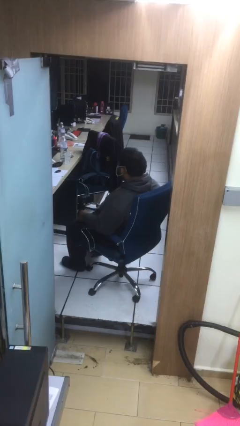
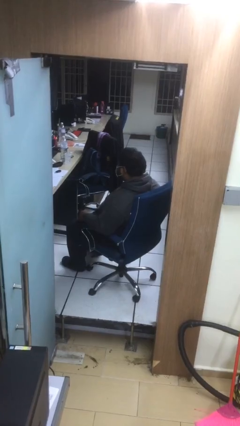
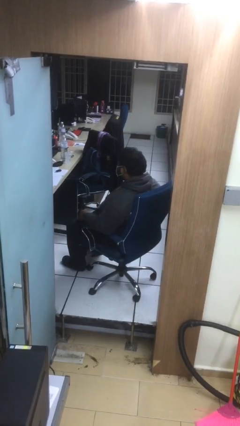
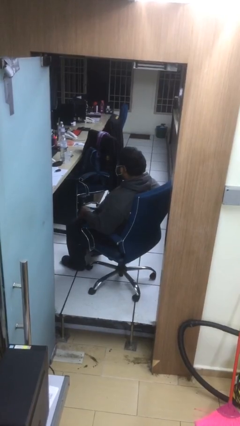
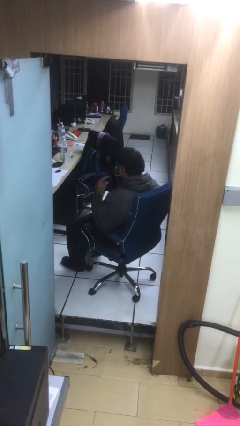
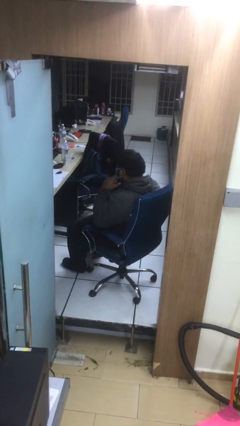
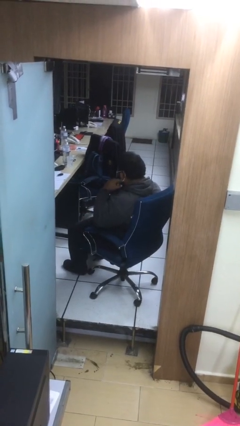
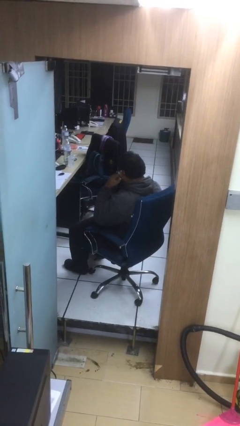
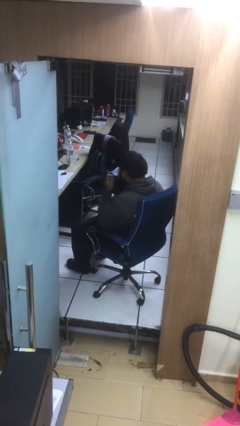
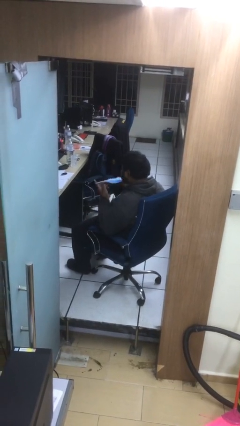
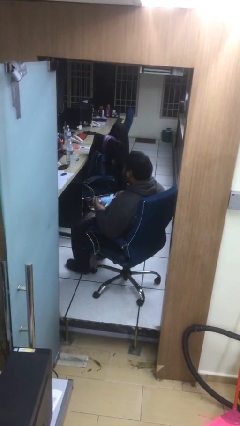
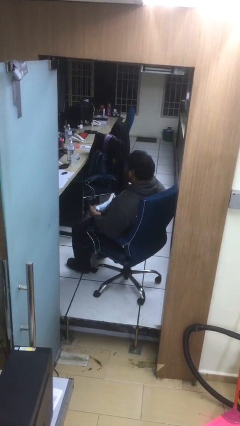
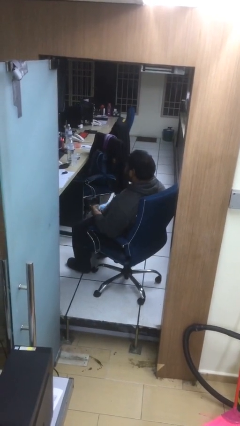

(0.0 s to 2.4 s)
person takes off facemask

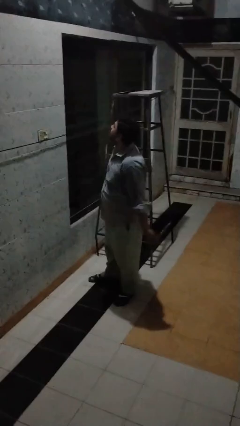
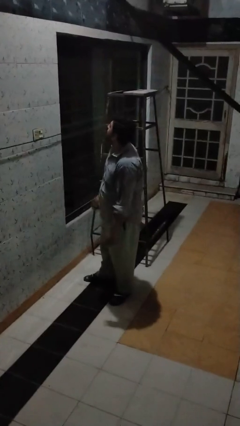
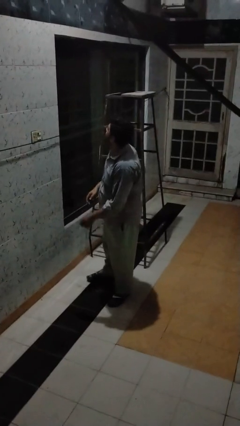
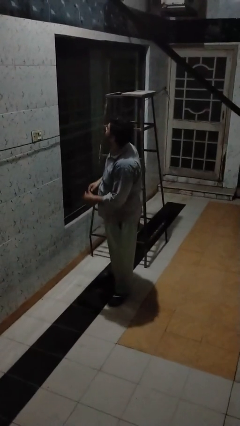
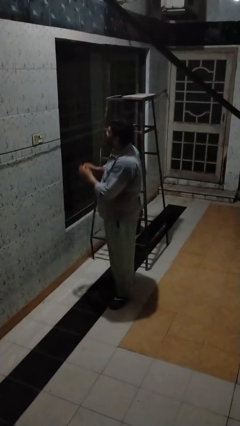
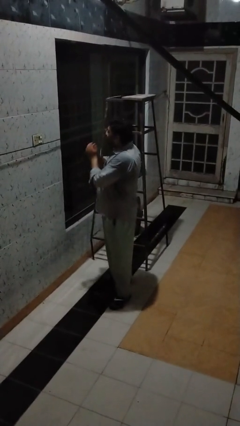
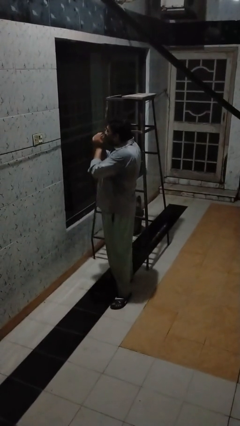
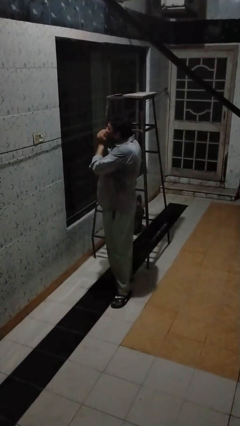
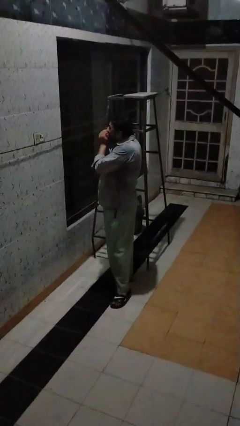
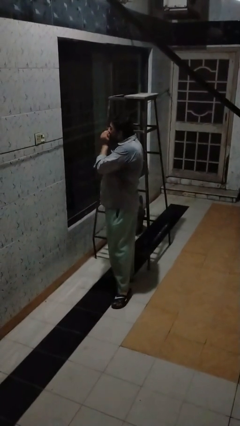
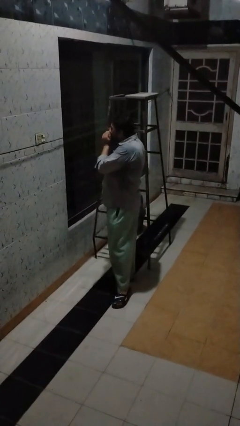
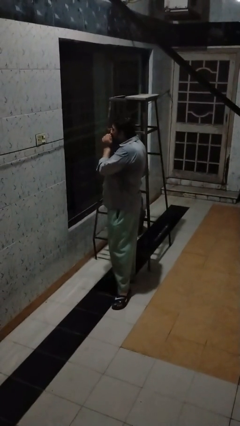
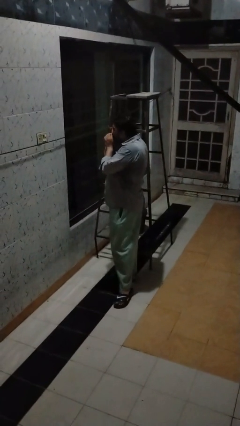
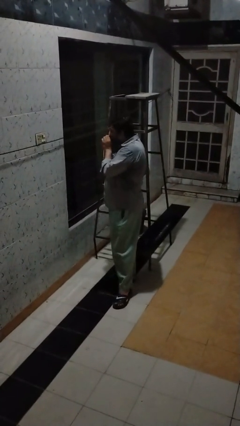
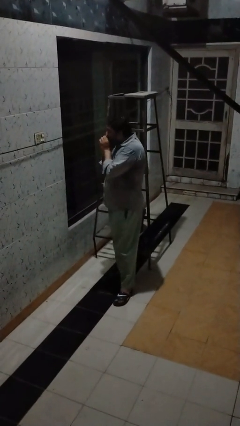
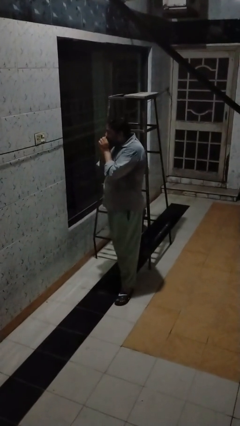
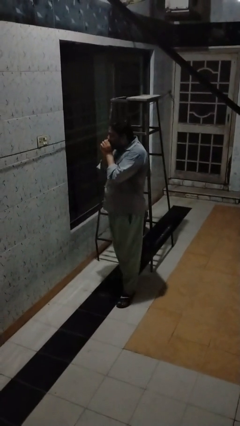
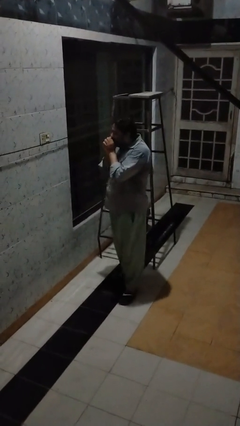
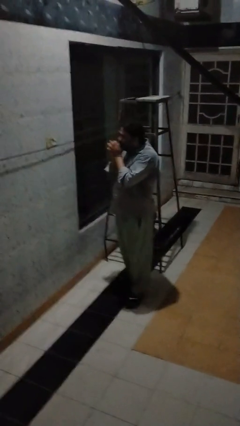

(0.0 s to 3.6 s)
person blows into hands

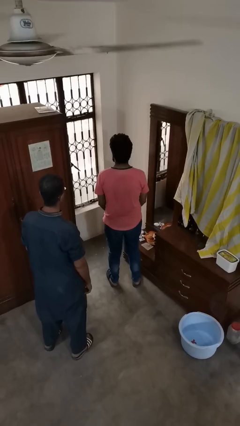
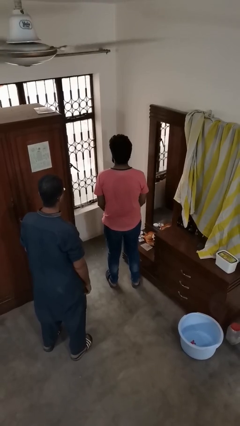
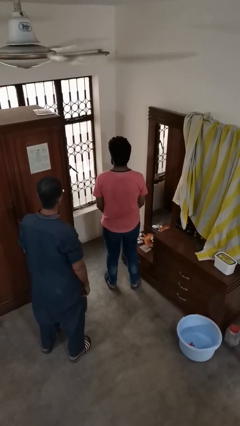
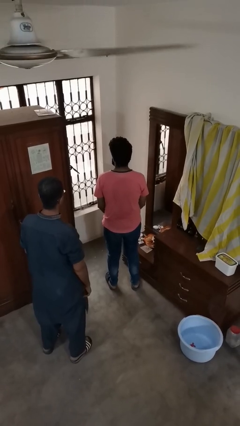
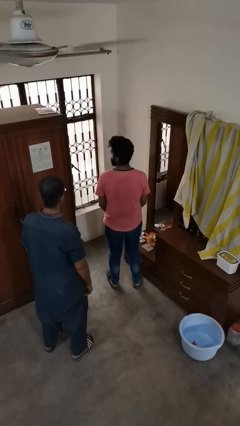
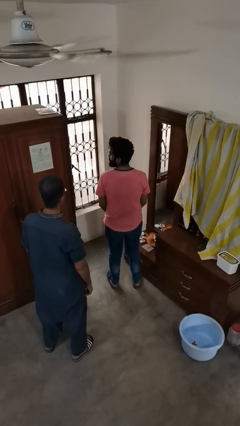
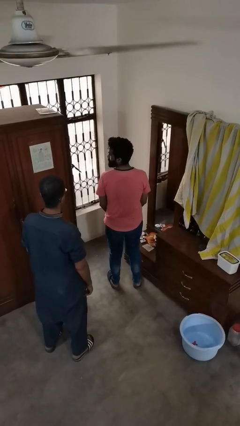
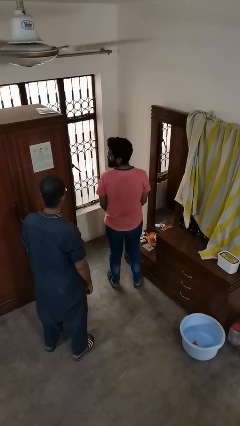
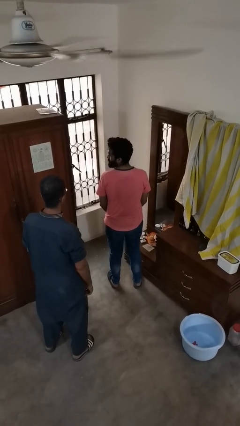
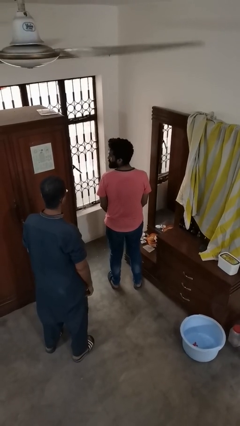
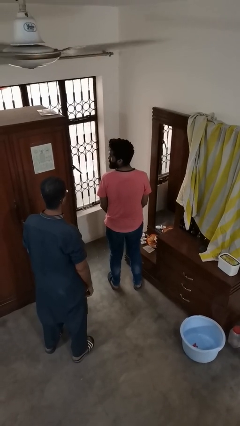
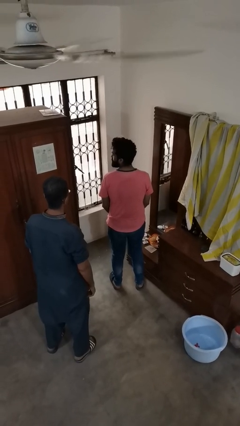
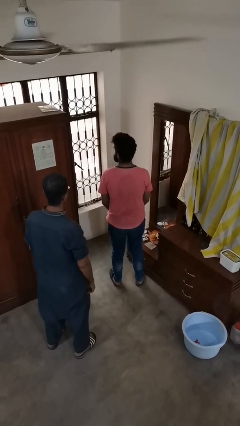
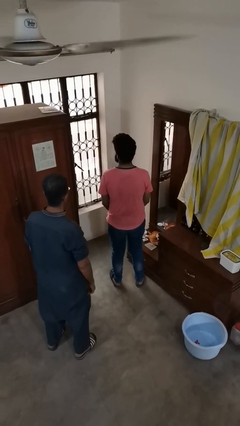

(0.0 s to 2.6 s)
person looks over shoulder

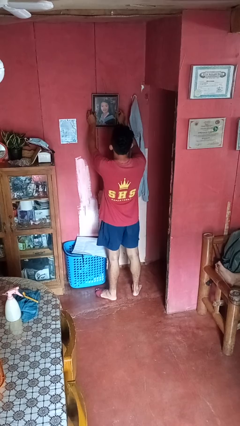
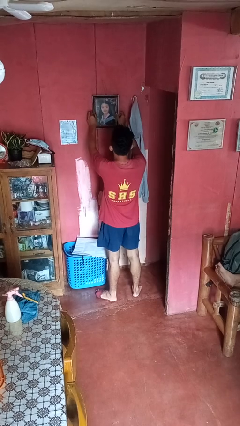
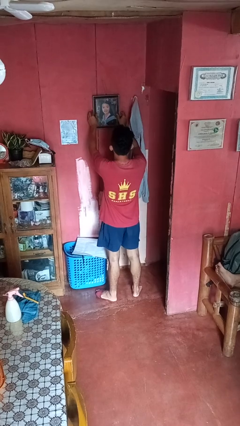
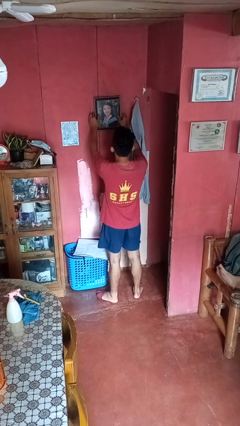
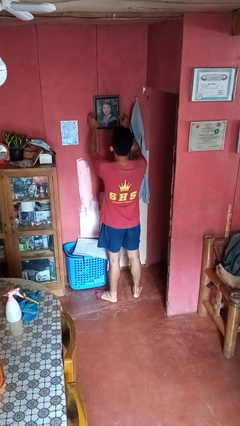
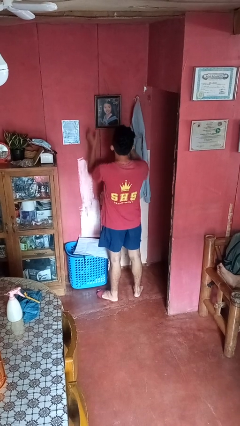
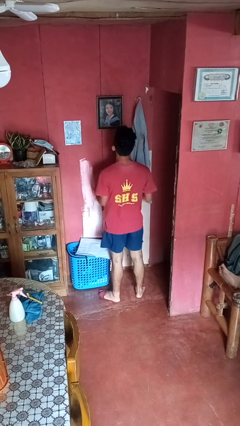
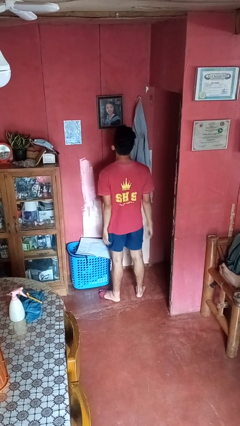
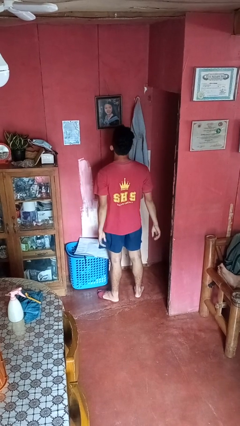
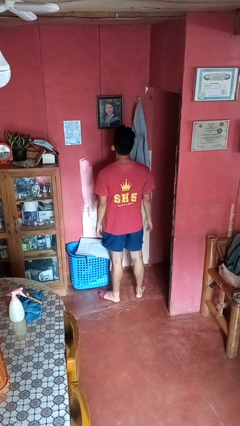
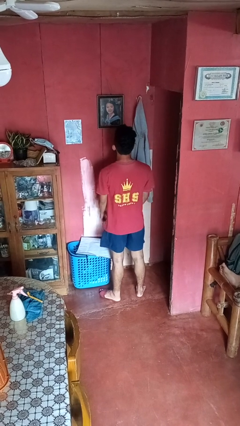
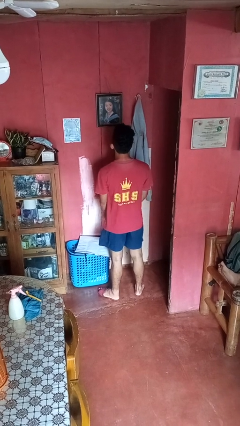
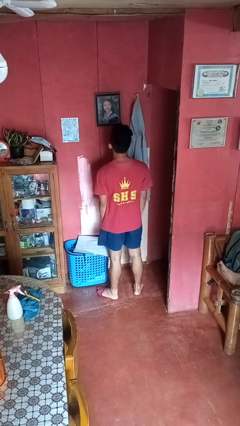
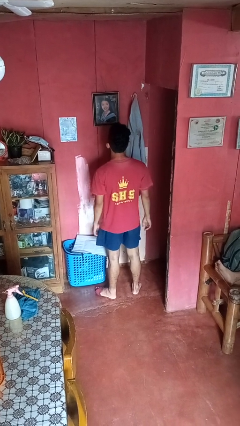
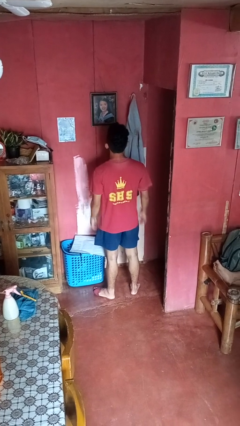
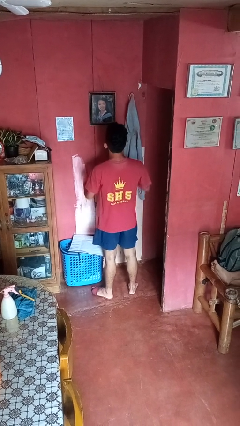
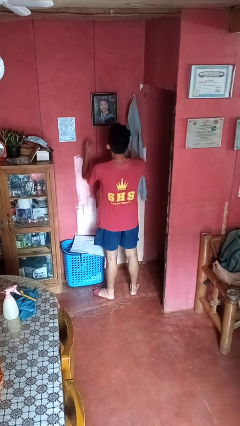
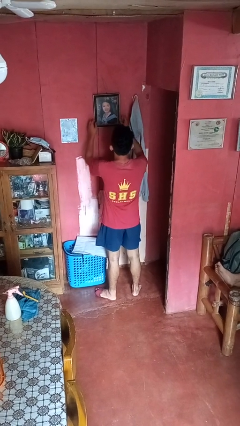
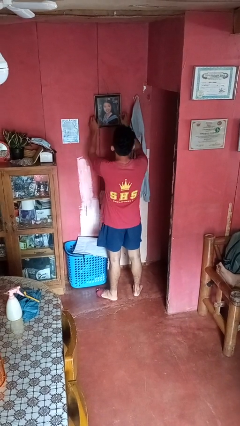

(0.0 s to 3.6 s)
person puts up picture frame

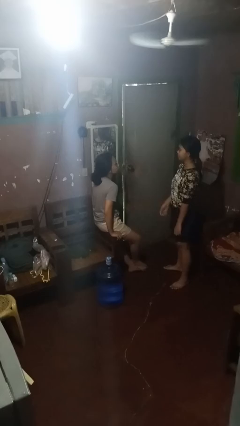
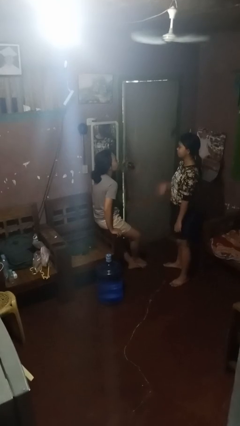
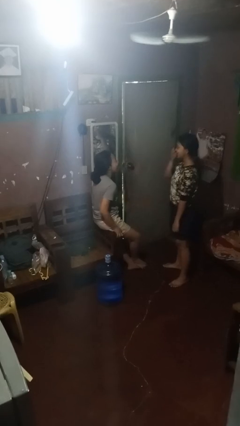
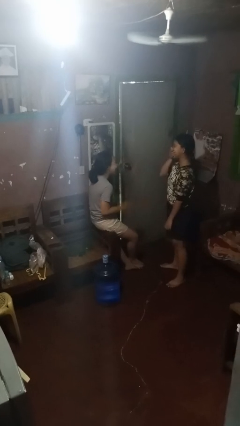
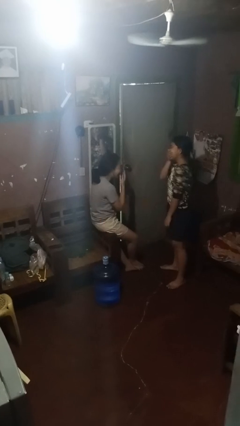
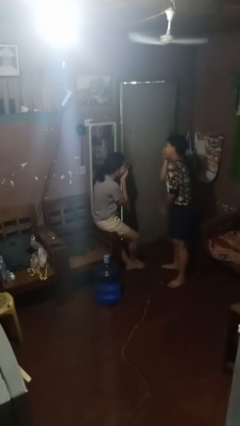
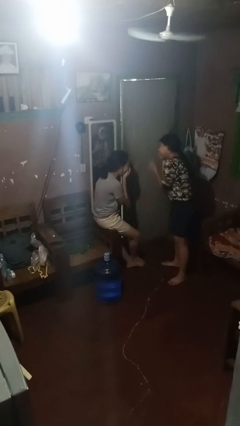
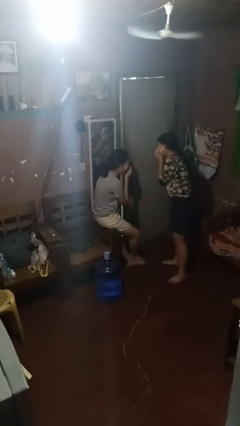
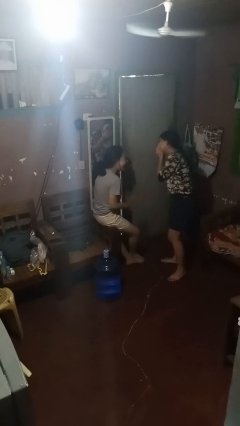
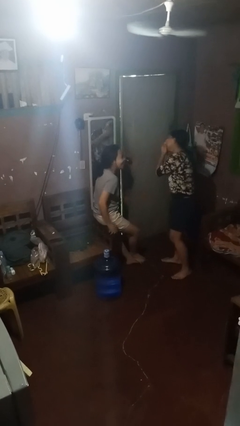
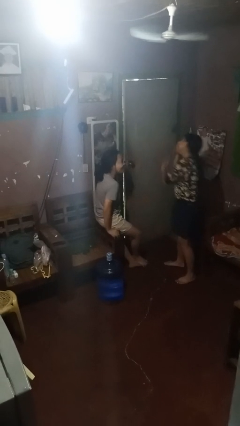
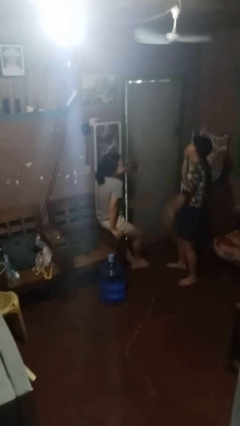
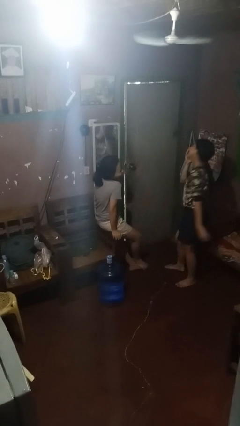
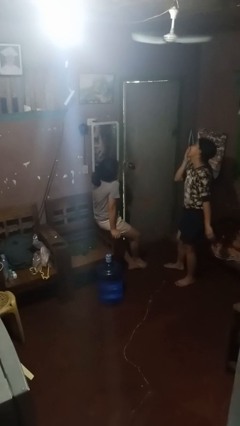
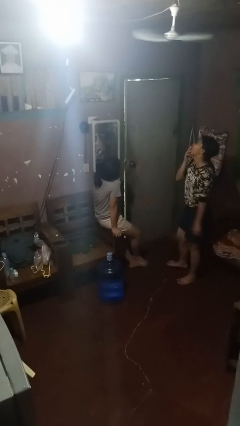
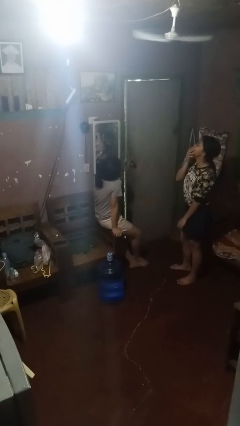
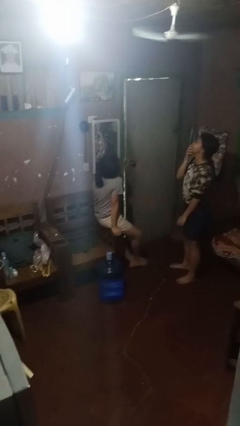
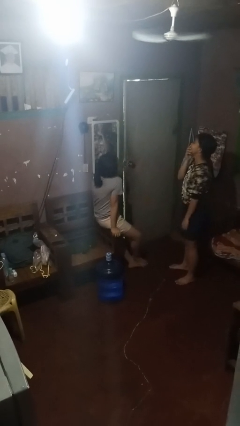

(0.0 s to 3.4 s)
person laughs with person

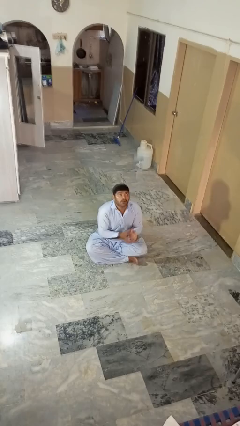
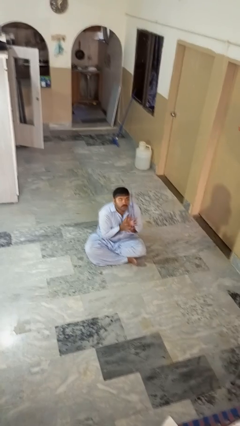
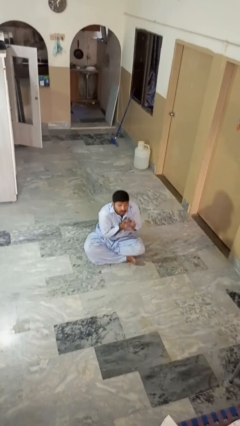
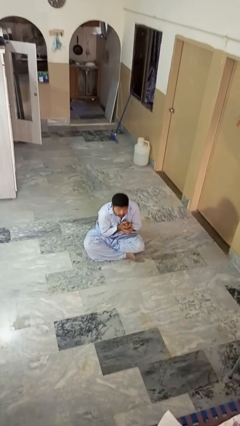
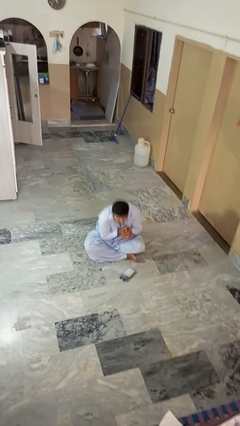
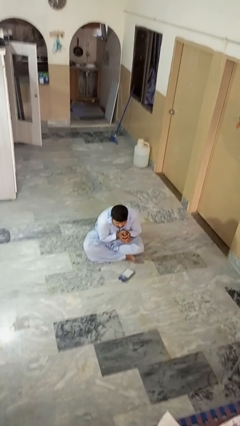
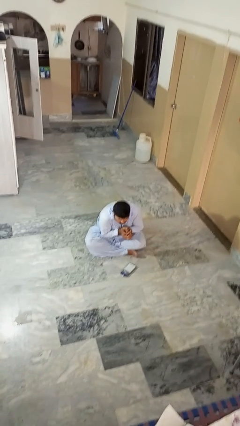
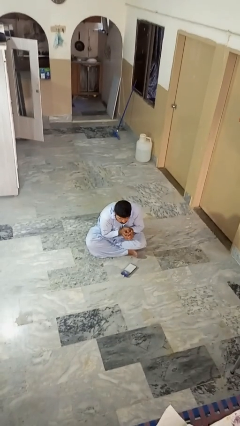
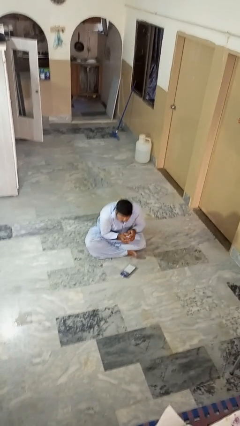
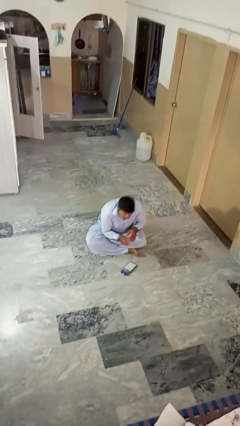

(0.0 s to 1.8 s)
person catches dropped object
